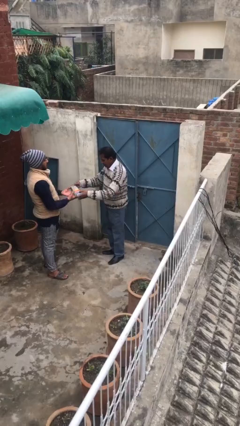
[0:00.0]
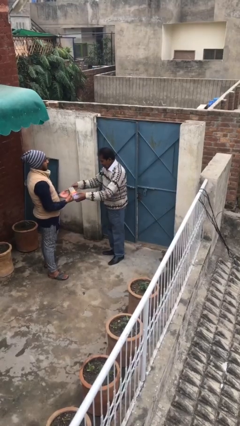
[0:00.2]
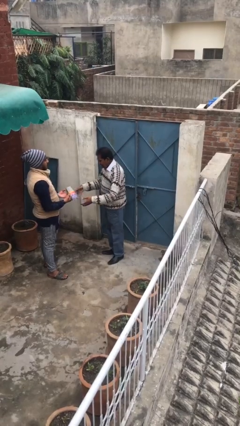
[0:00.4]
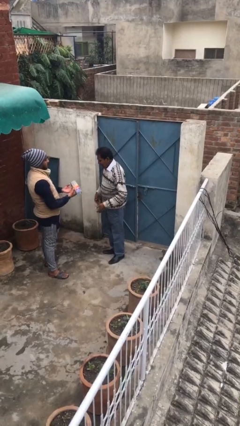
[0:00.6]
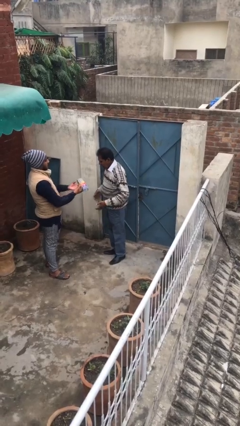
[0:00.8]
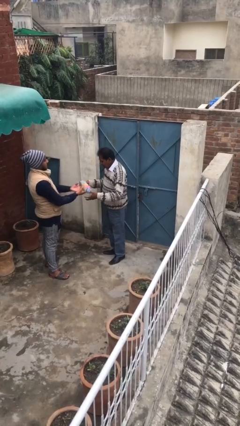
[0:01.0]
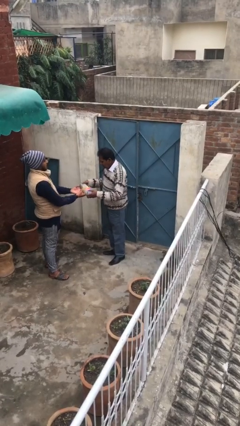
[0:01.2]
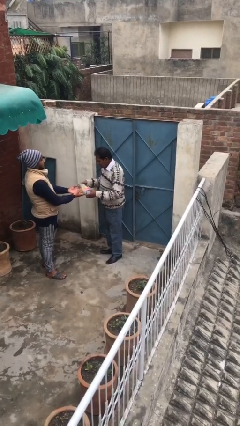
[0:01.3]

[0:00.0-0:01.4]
person transfers object to person

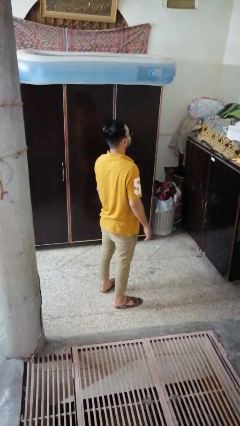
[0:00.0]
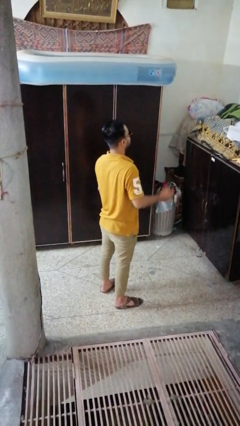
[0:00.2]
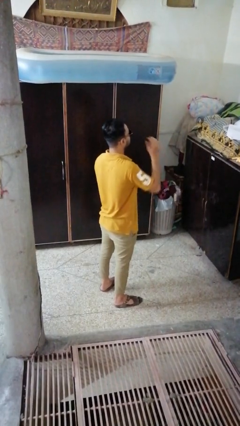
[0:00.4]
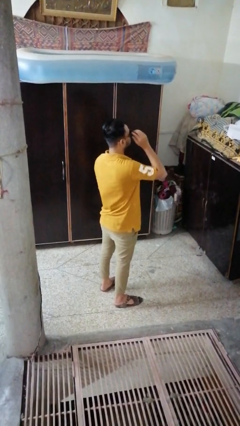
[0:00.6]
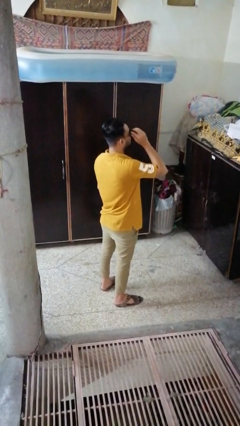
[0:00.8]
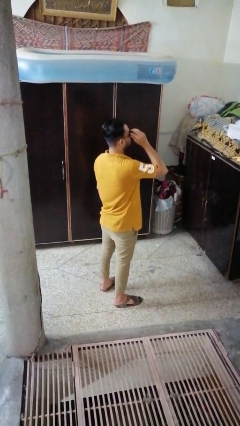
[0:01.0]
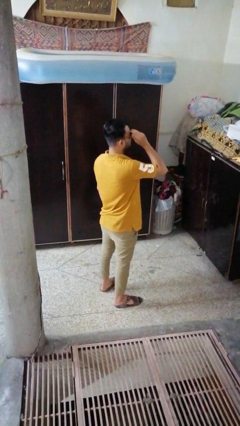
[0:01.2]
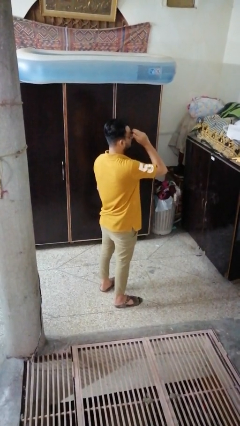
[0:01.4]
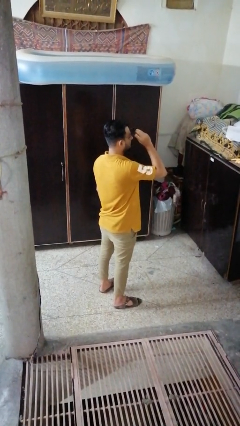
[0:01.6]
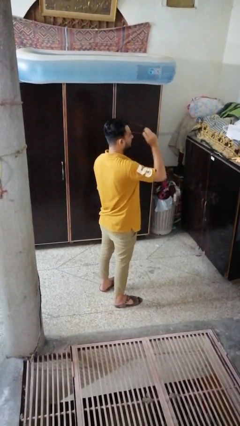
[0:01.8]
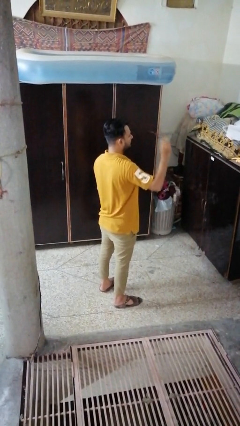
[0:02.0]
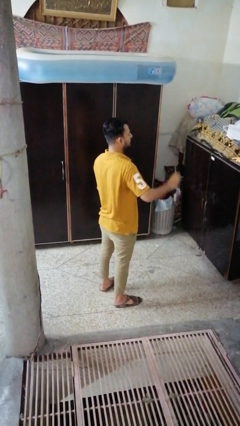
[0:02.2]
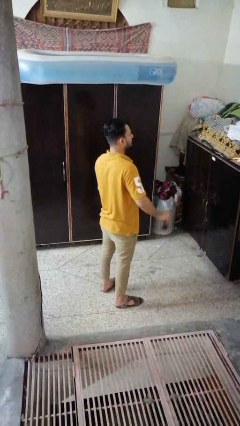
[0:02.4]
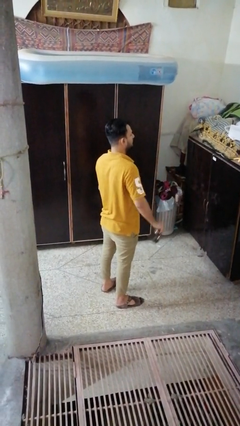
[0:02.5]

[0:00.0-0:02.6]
person takes off sunglasses

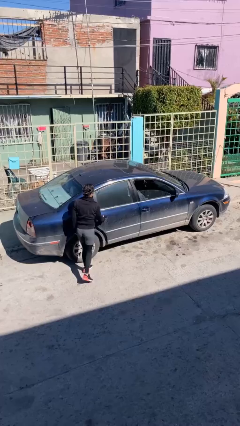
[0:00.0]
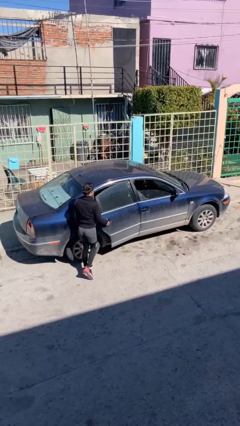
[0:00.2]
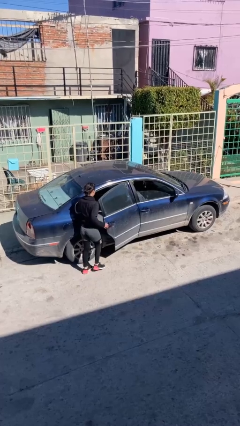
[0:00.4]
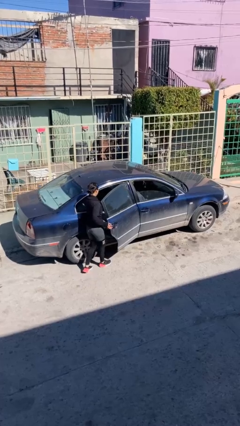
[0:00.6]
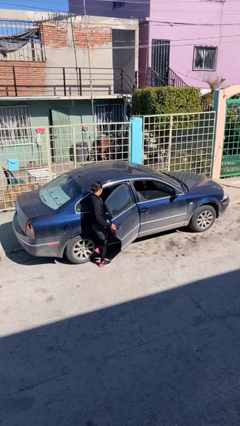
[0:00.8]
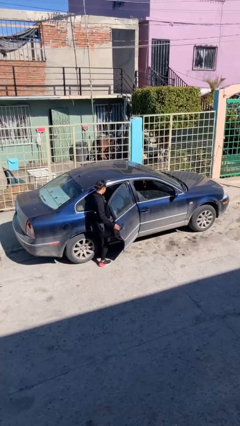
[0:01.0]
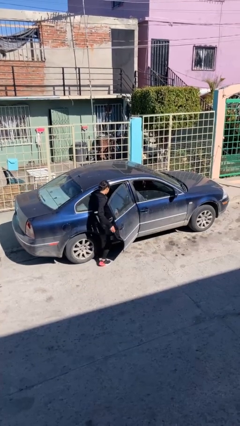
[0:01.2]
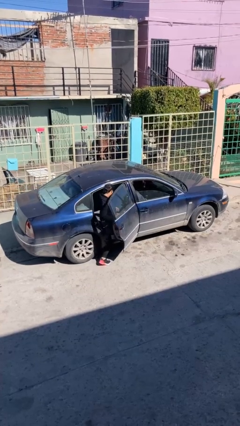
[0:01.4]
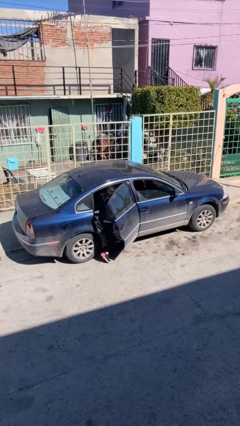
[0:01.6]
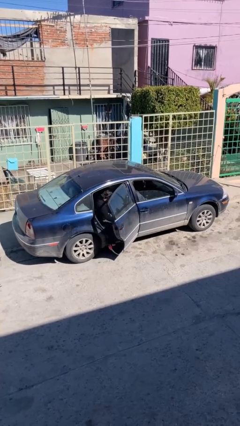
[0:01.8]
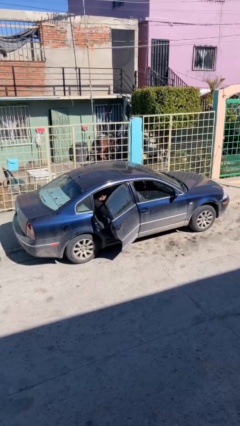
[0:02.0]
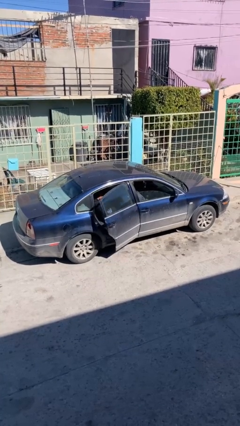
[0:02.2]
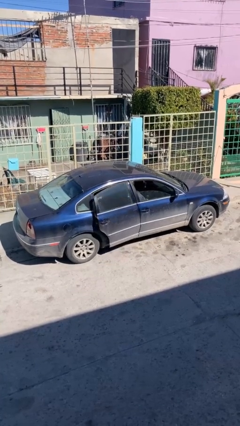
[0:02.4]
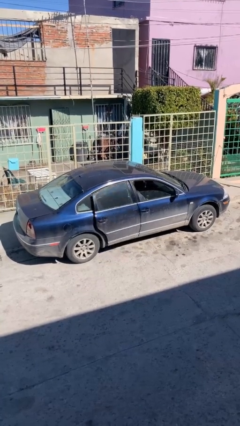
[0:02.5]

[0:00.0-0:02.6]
car picks up person

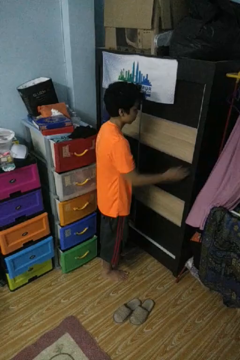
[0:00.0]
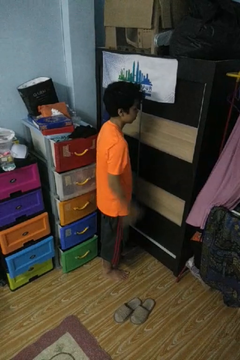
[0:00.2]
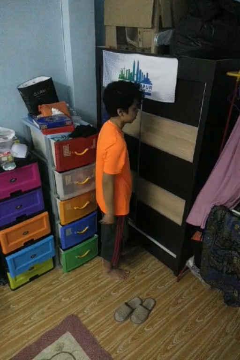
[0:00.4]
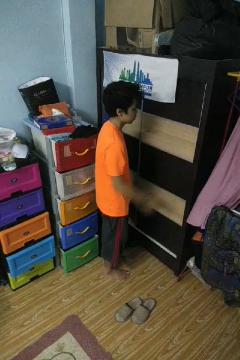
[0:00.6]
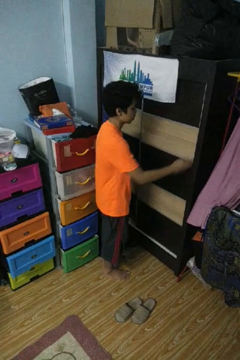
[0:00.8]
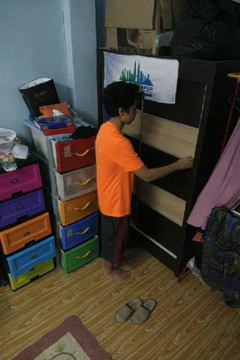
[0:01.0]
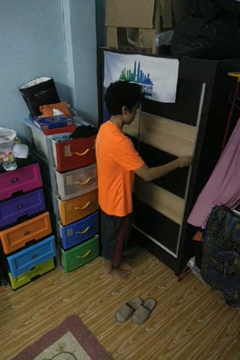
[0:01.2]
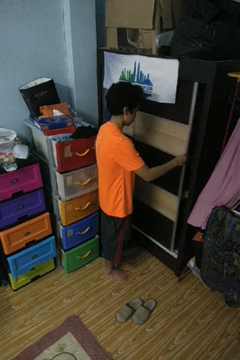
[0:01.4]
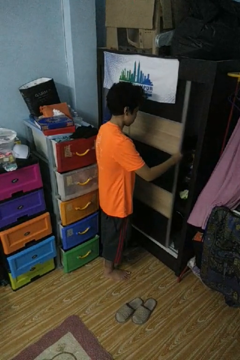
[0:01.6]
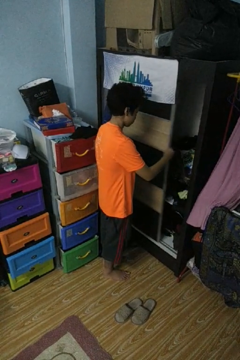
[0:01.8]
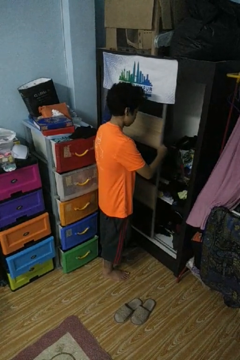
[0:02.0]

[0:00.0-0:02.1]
person opens closet door

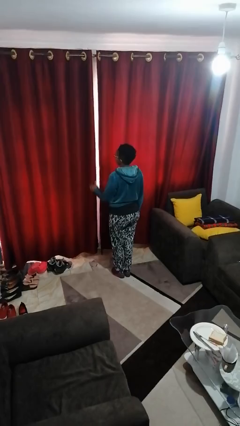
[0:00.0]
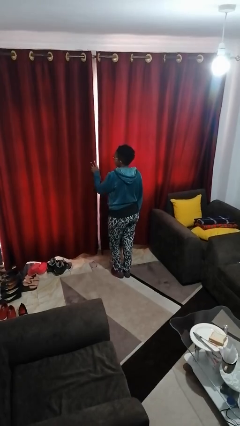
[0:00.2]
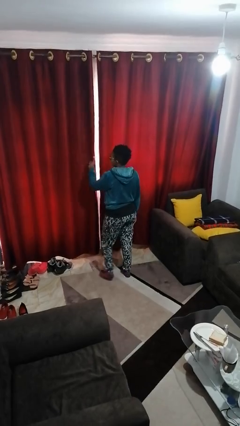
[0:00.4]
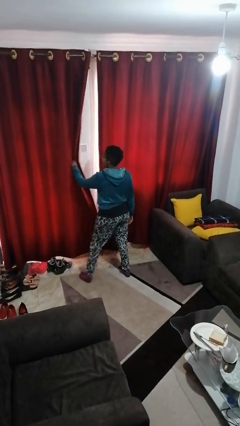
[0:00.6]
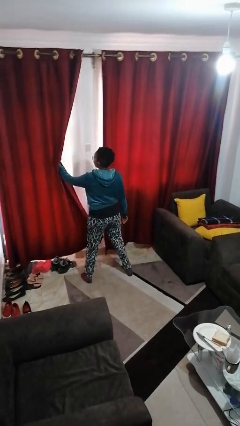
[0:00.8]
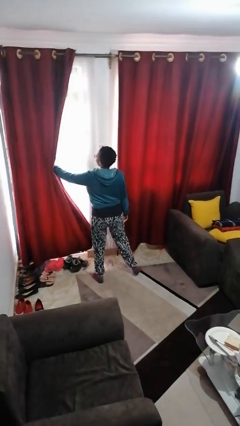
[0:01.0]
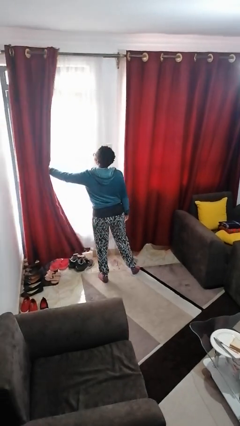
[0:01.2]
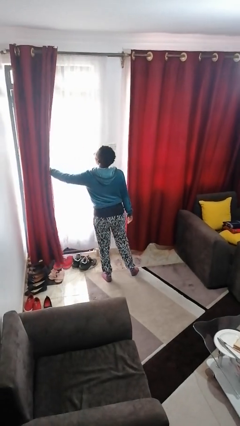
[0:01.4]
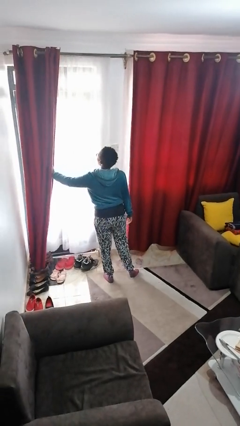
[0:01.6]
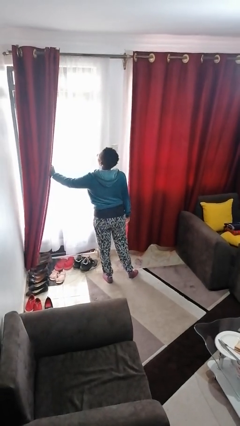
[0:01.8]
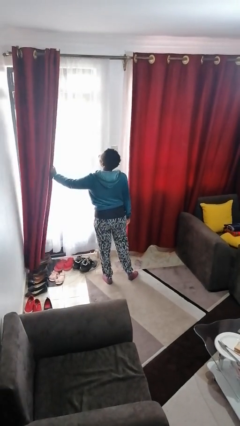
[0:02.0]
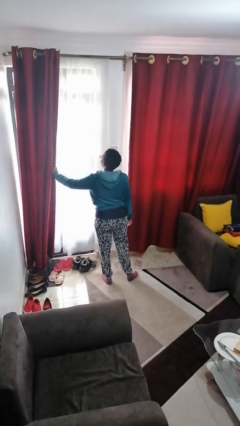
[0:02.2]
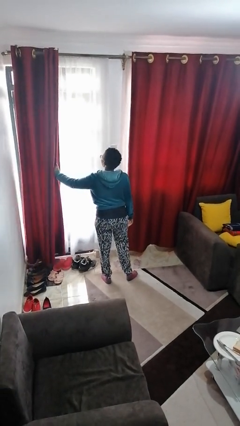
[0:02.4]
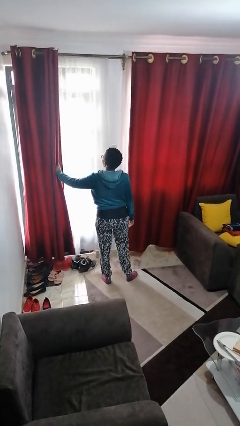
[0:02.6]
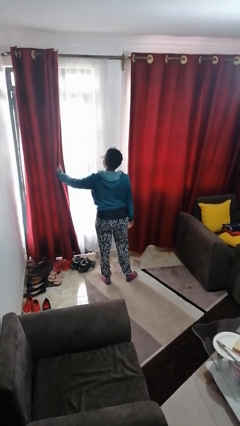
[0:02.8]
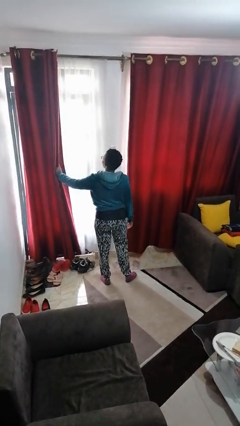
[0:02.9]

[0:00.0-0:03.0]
person opens curtains

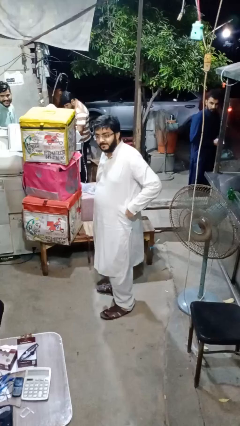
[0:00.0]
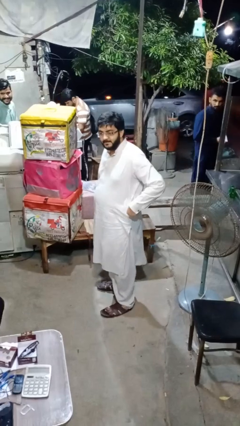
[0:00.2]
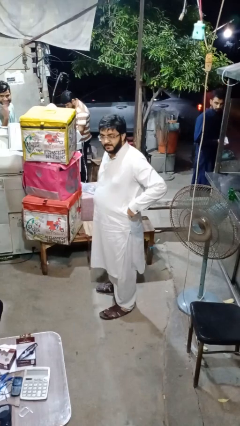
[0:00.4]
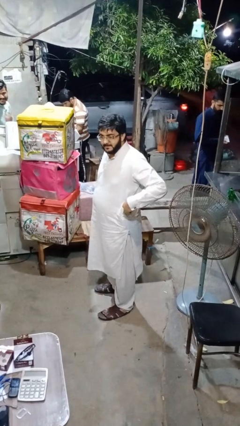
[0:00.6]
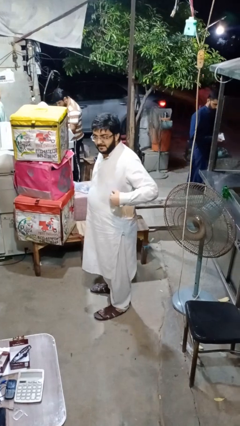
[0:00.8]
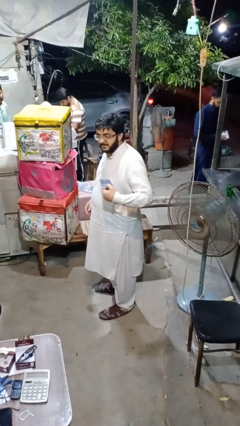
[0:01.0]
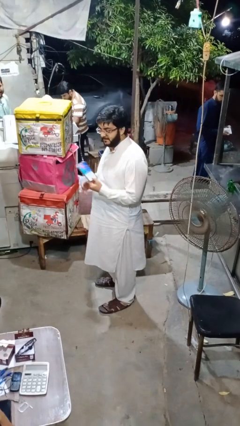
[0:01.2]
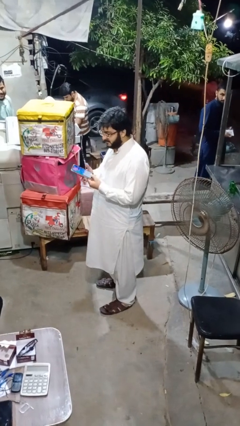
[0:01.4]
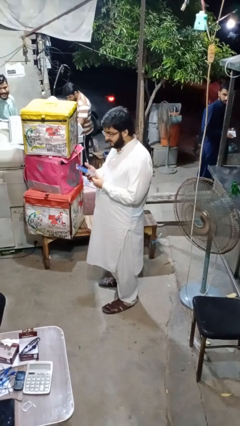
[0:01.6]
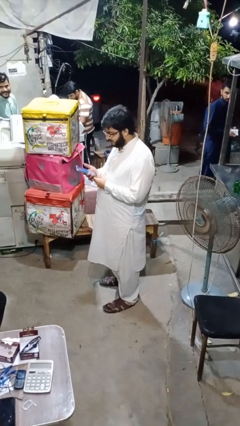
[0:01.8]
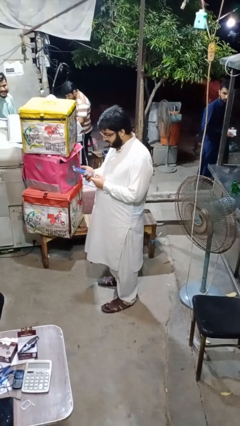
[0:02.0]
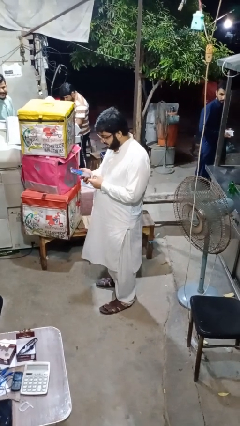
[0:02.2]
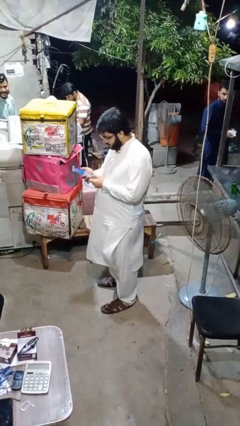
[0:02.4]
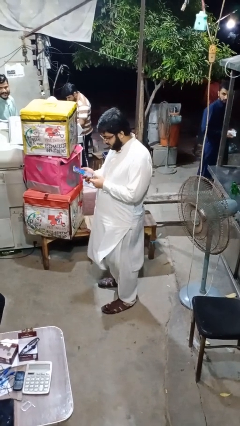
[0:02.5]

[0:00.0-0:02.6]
person takes phone from pocket

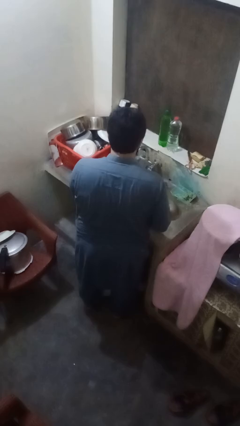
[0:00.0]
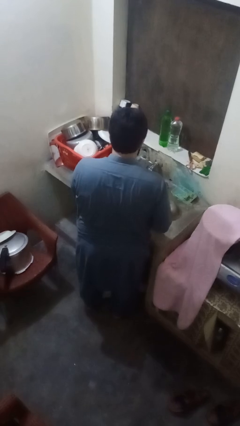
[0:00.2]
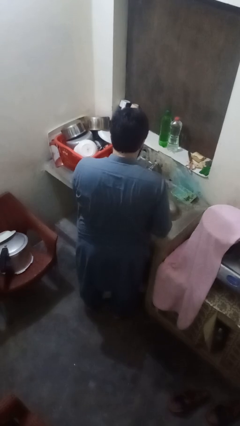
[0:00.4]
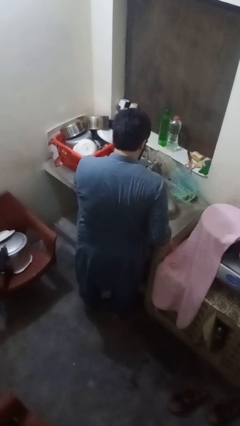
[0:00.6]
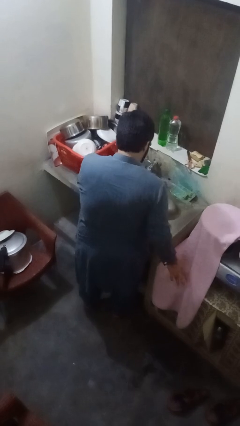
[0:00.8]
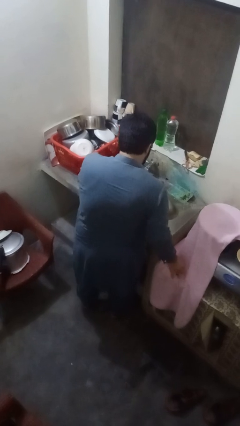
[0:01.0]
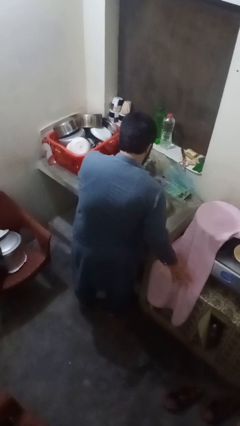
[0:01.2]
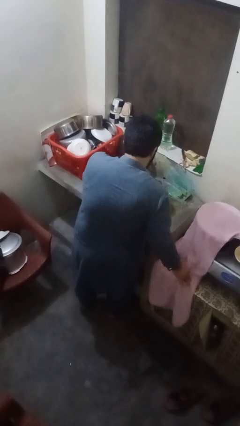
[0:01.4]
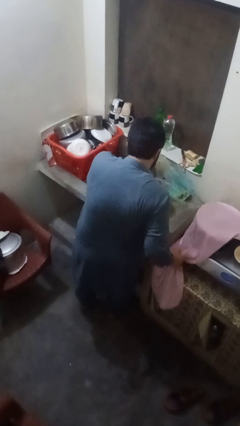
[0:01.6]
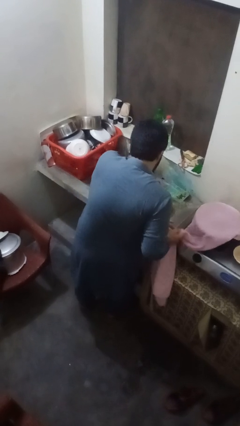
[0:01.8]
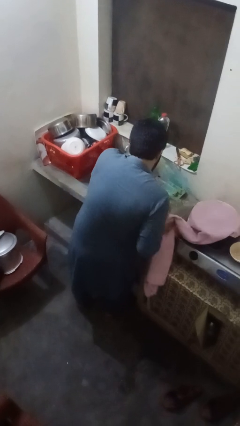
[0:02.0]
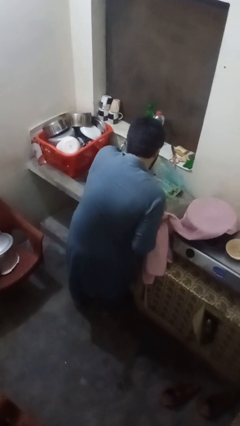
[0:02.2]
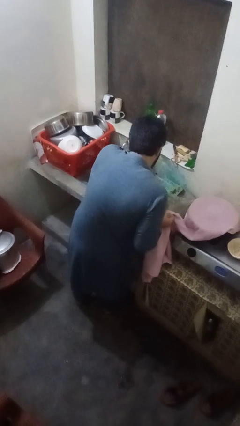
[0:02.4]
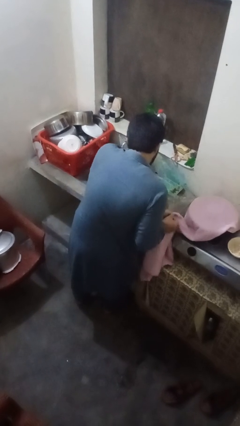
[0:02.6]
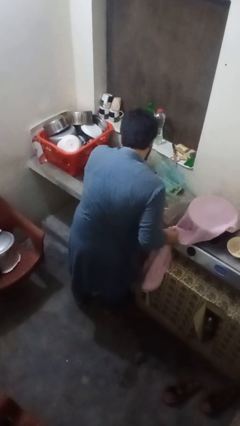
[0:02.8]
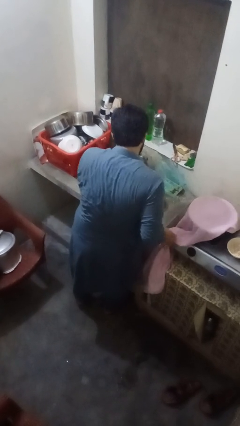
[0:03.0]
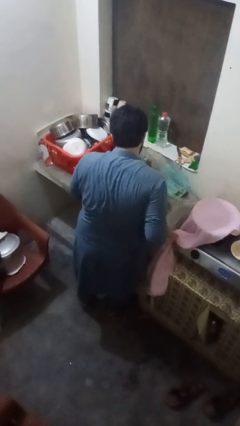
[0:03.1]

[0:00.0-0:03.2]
person dries hands with towel
